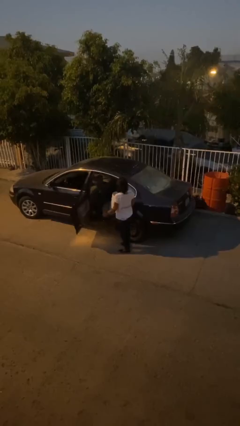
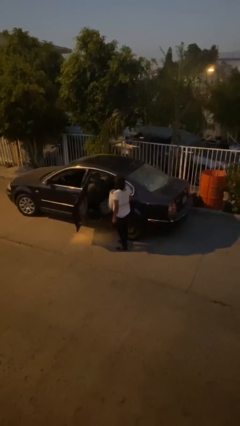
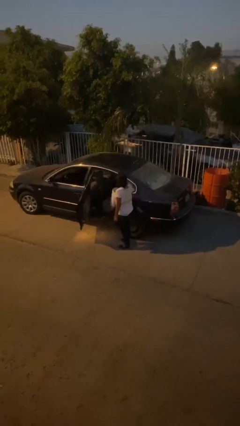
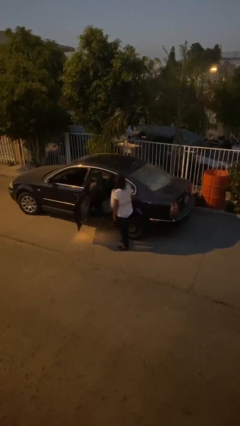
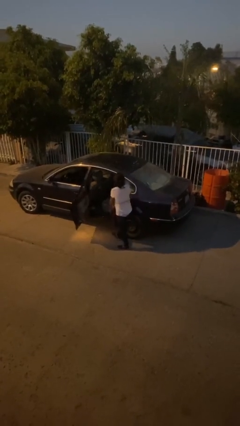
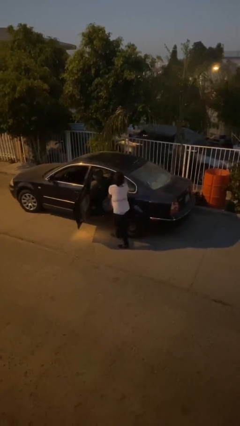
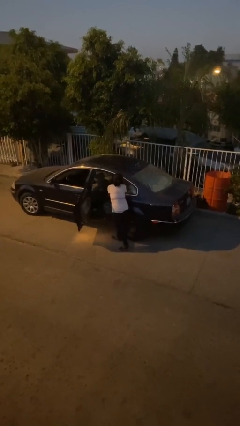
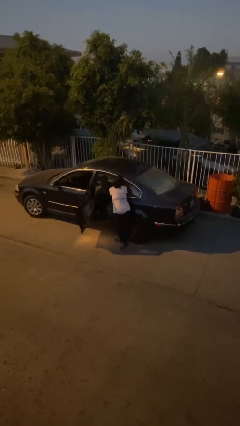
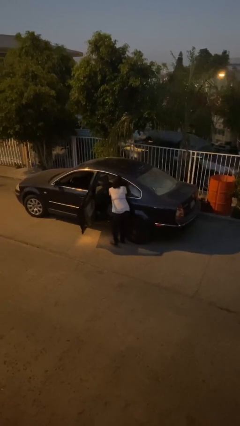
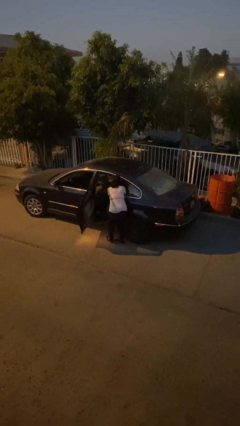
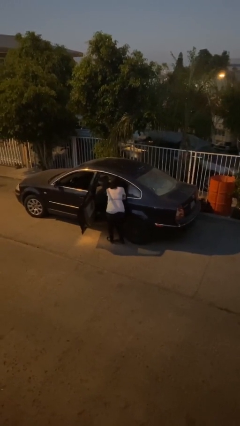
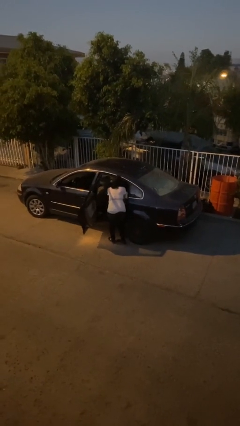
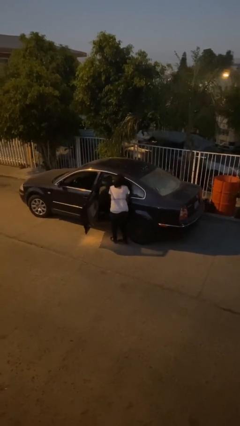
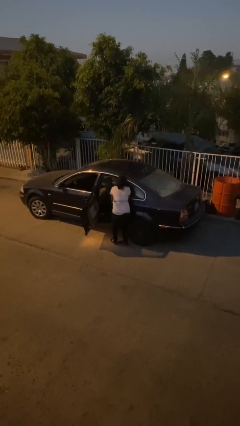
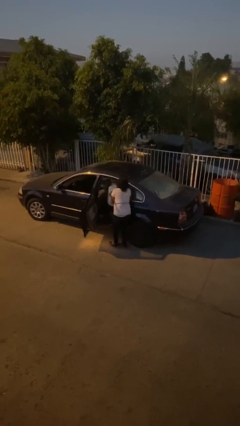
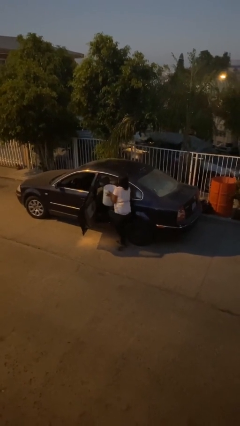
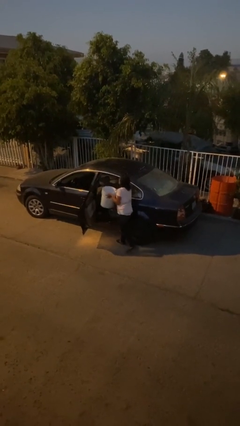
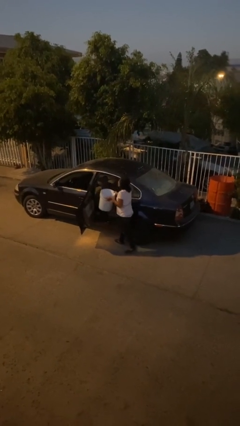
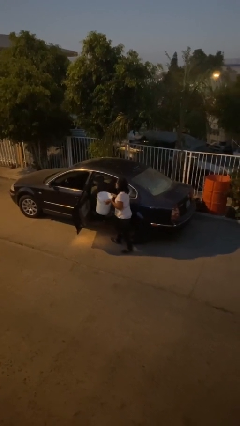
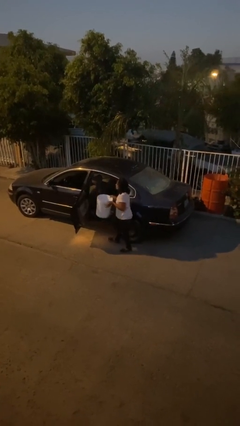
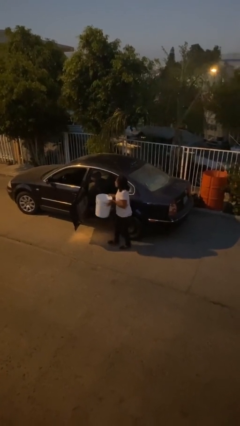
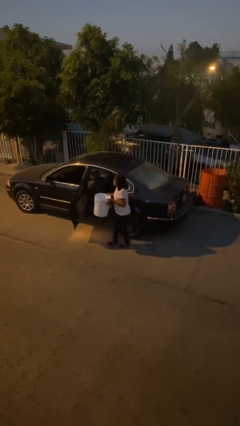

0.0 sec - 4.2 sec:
person unloads car

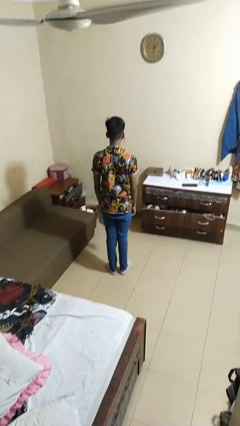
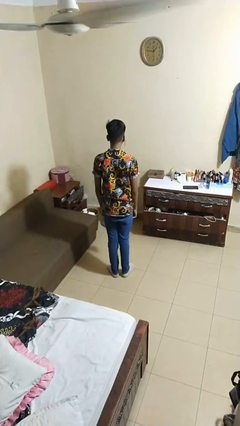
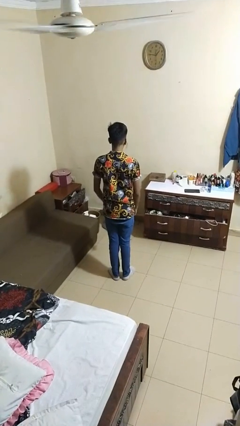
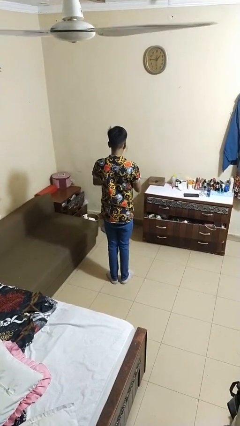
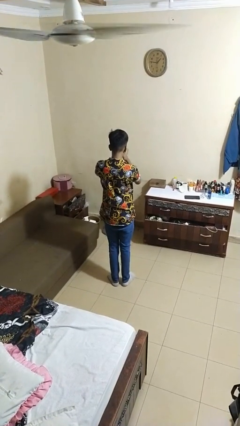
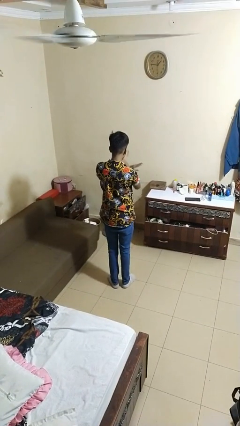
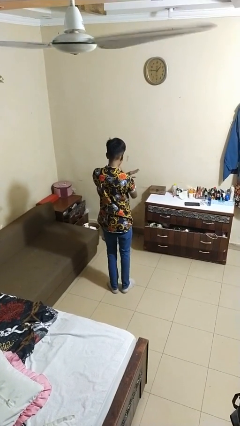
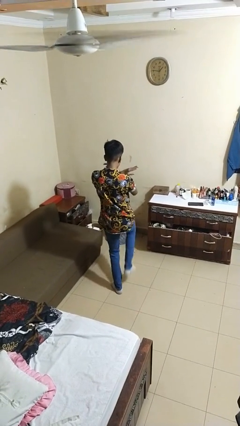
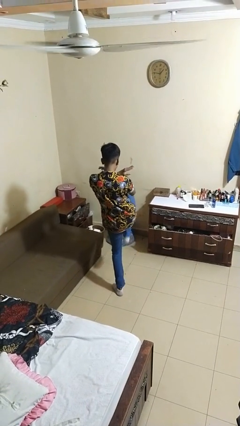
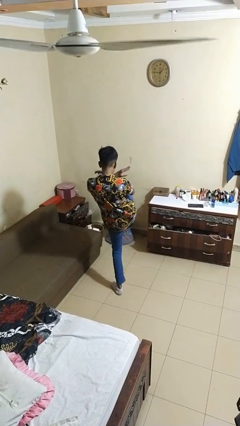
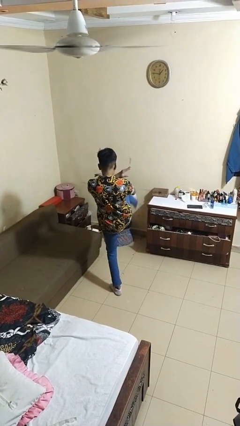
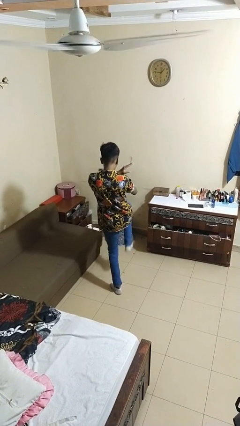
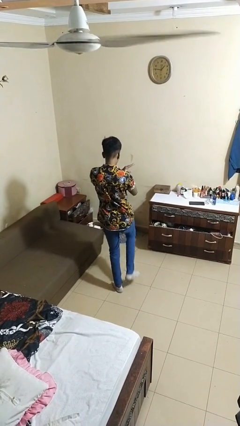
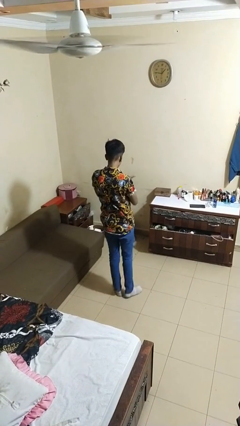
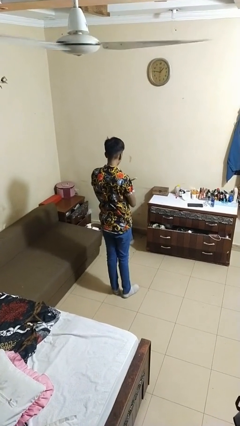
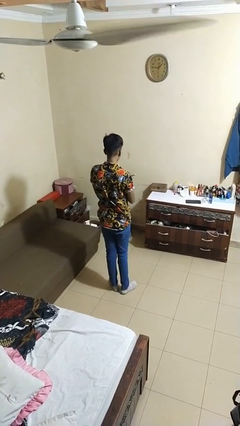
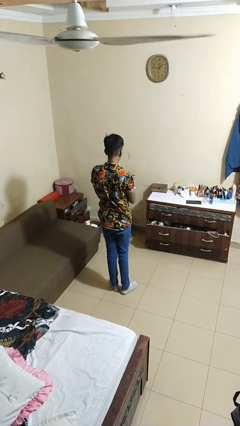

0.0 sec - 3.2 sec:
person karate kicks

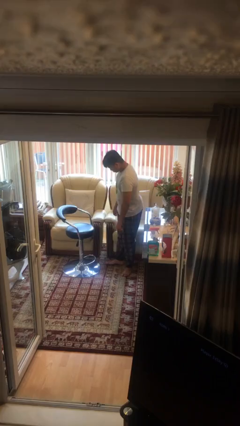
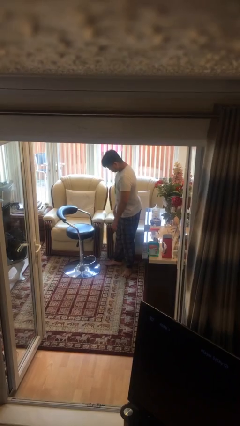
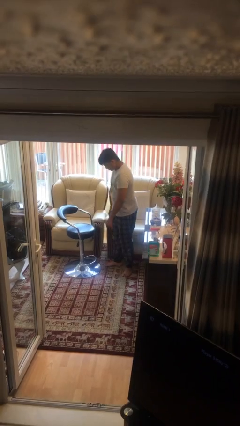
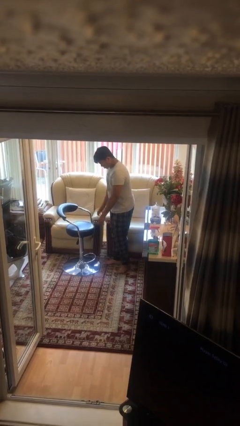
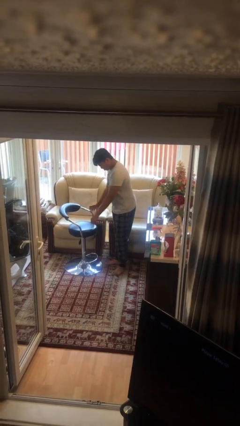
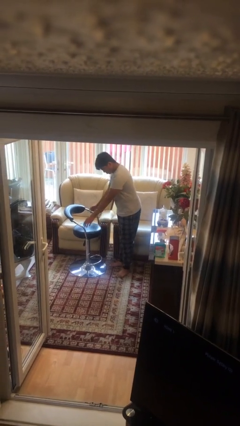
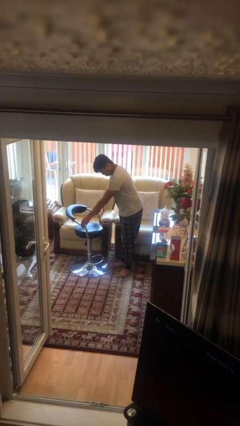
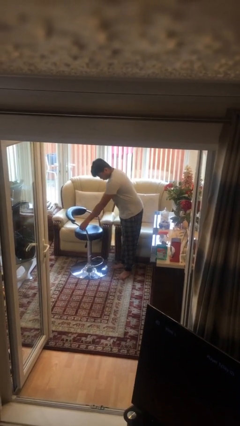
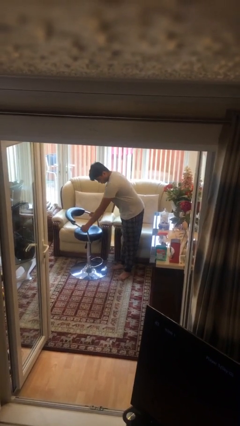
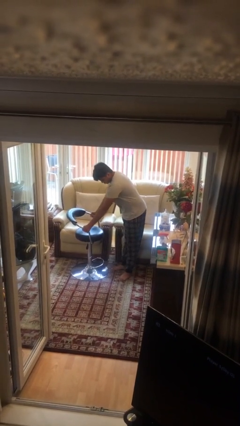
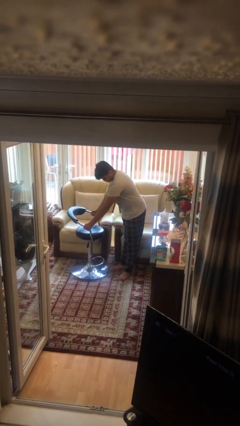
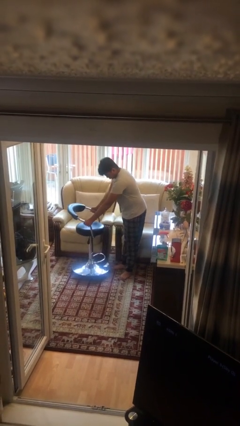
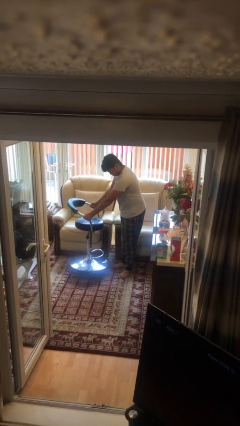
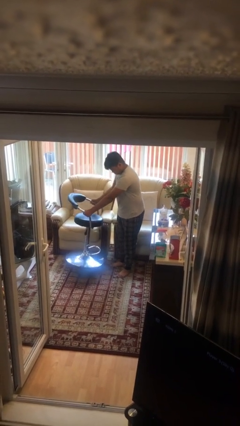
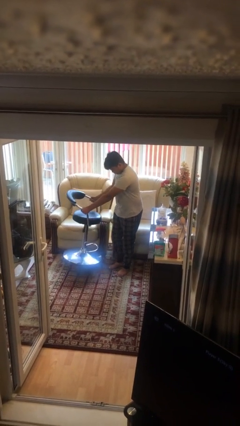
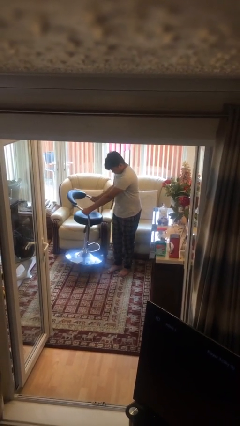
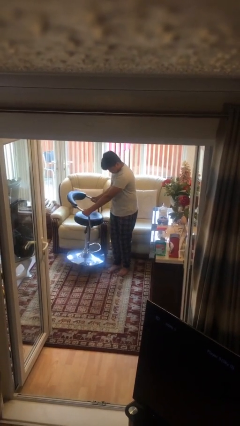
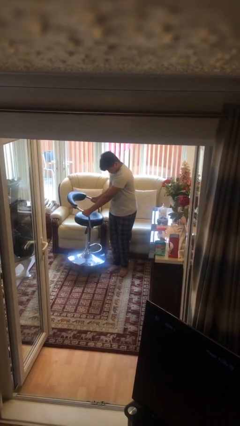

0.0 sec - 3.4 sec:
person picks up object from floor

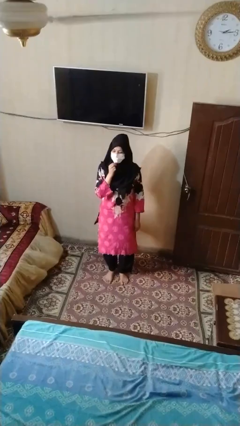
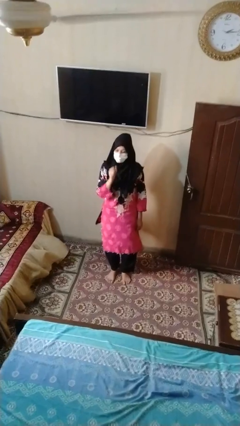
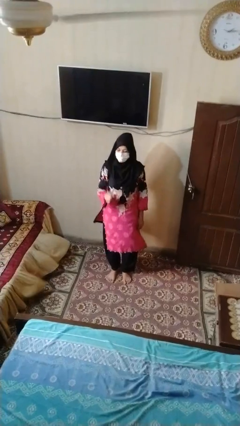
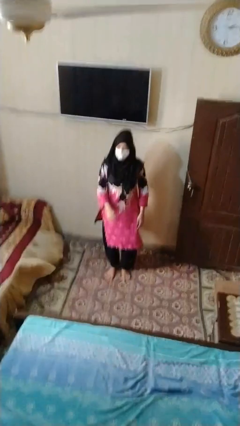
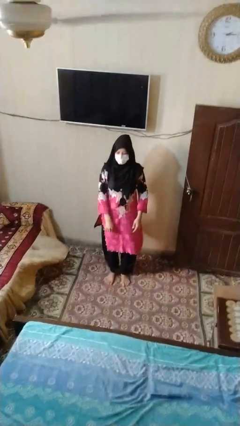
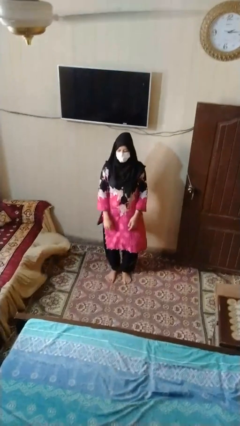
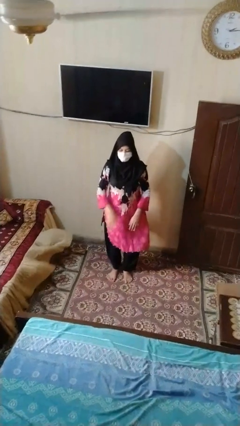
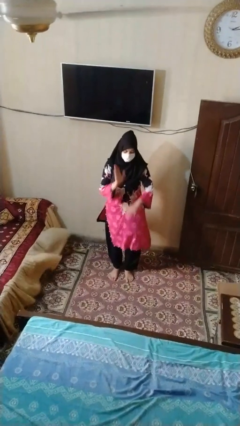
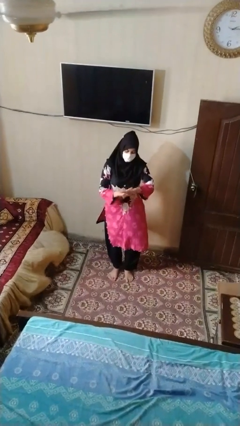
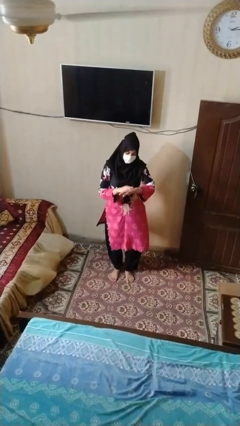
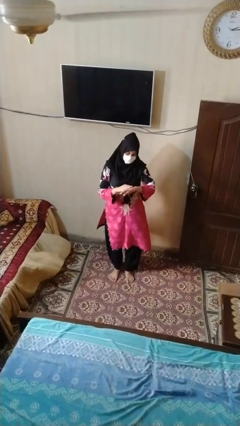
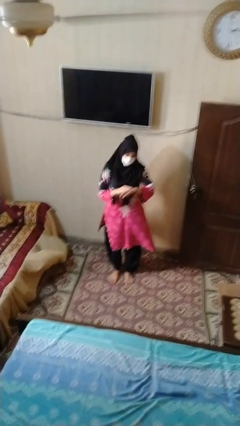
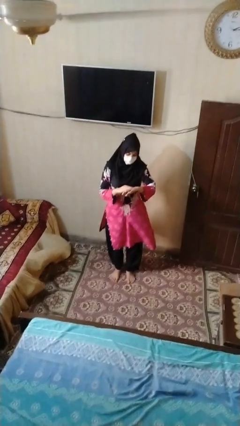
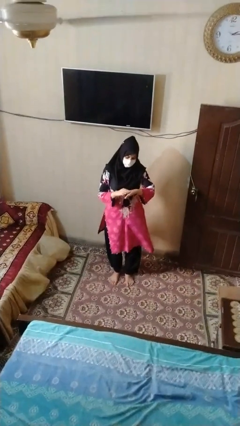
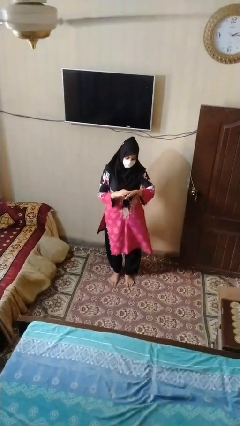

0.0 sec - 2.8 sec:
person opens jewelry box

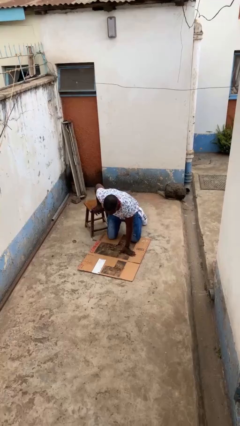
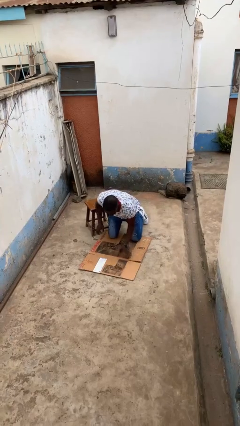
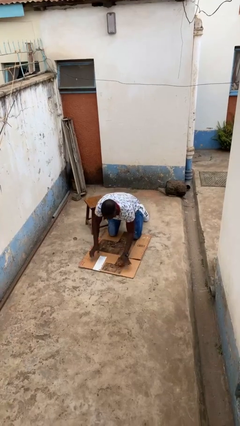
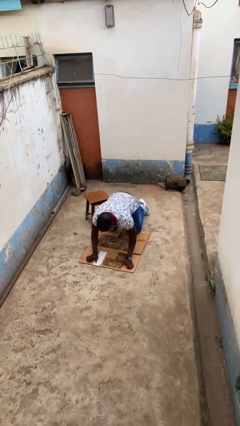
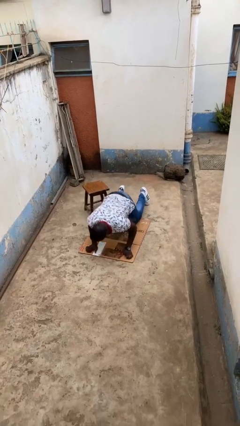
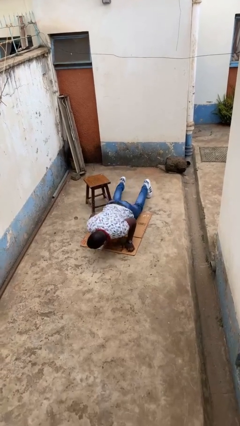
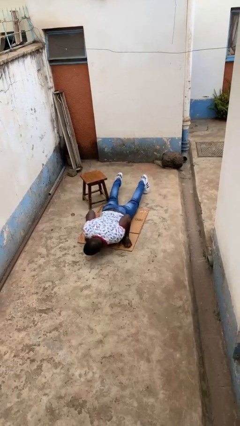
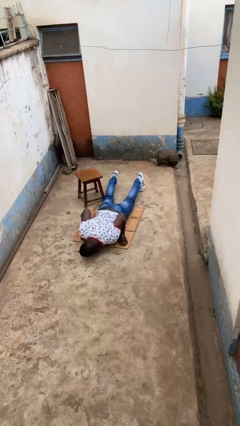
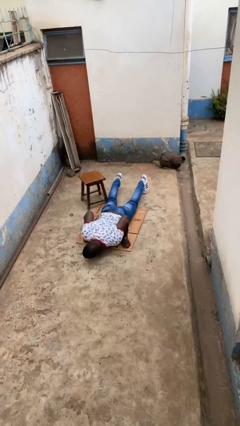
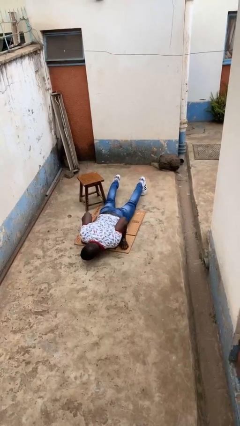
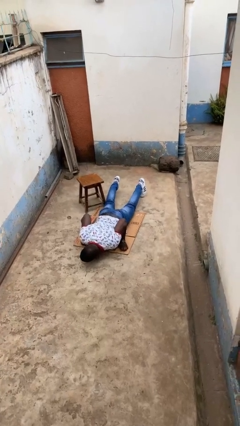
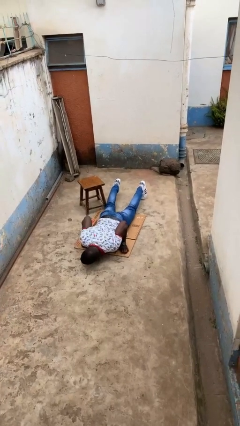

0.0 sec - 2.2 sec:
person lies down on floor

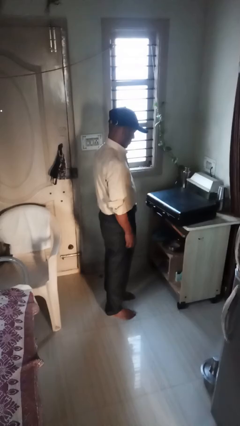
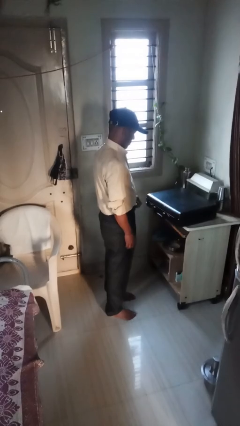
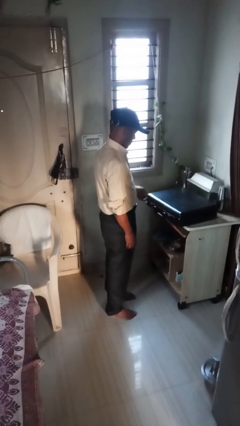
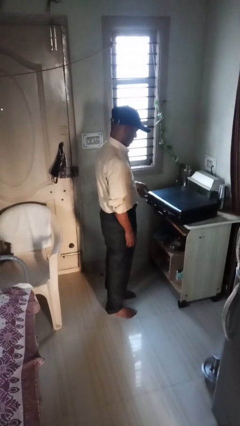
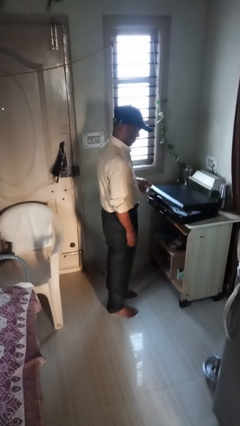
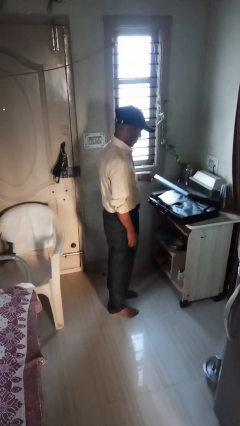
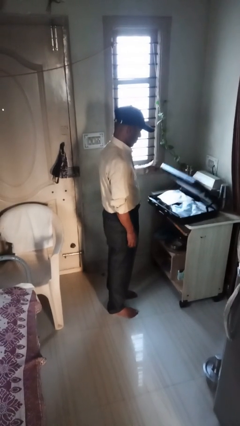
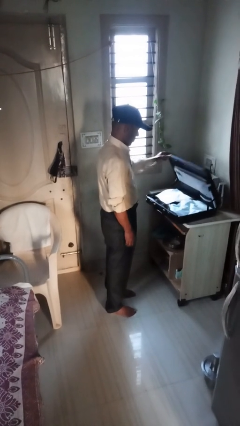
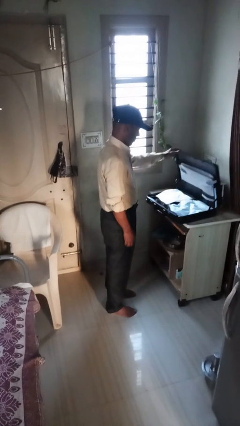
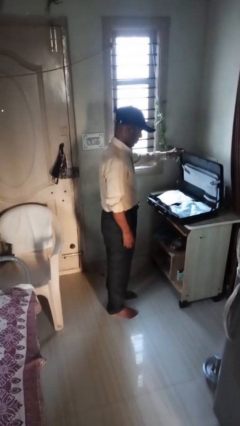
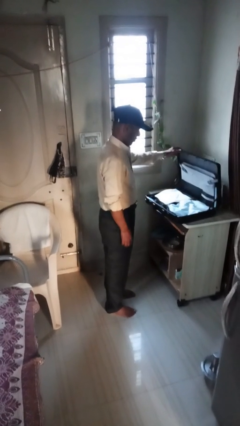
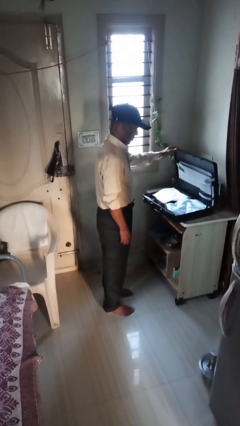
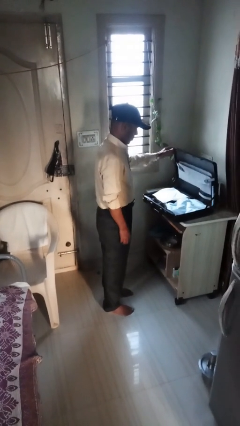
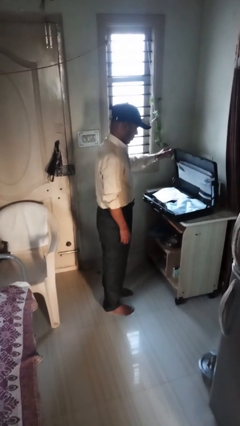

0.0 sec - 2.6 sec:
person opens suitcase
